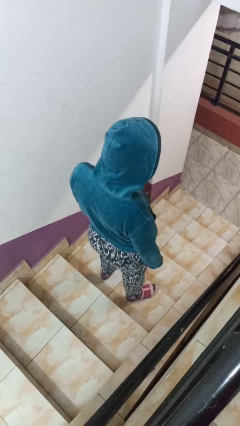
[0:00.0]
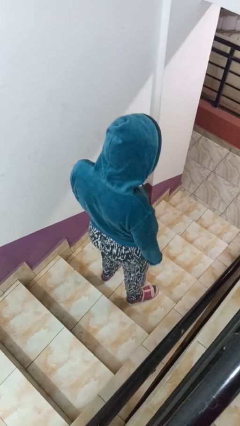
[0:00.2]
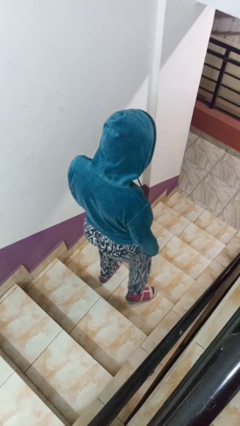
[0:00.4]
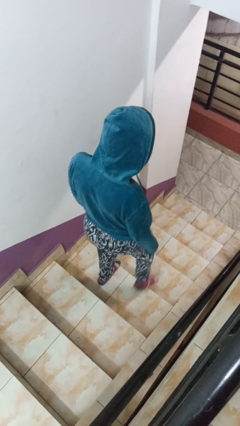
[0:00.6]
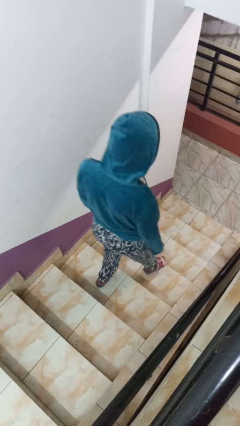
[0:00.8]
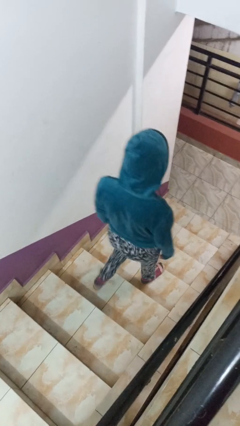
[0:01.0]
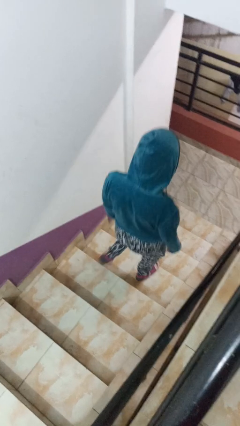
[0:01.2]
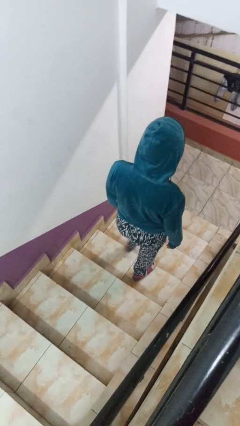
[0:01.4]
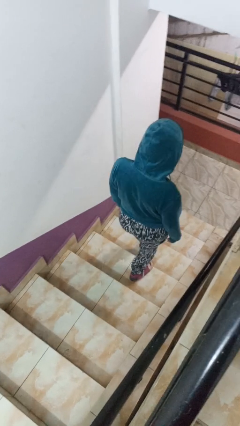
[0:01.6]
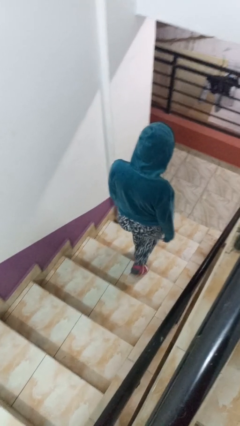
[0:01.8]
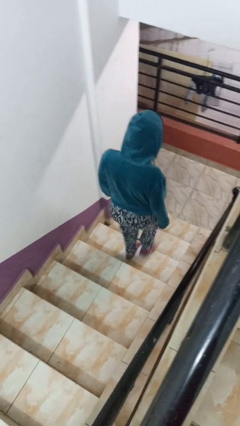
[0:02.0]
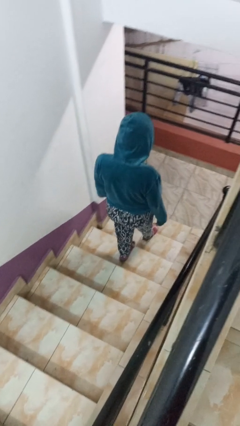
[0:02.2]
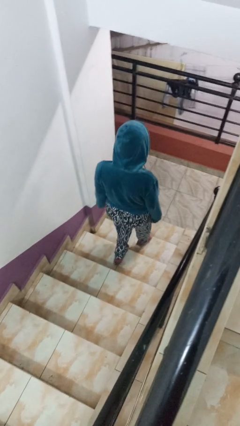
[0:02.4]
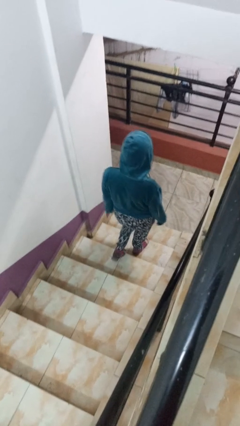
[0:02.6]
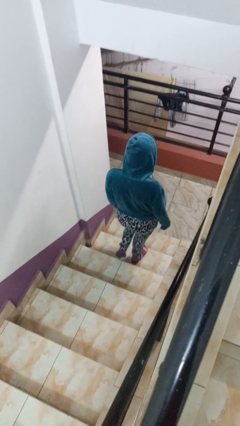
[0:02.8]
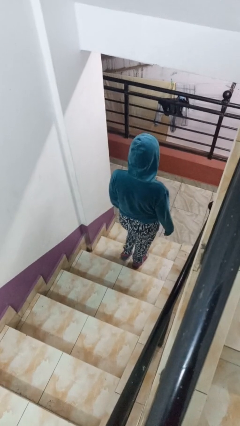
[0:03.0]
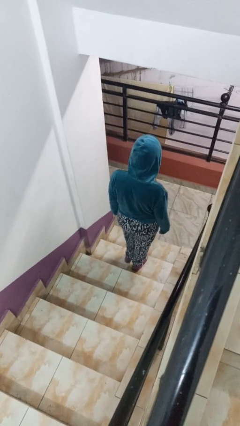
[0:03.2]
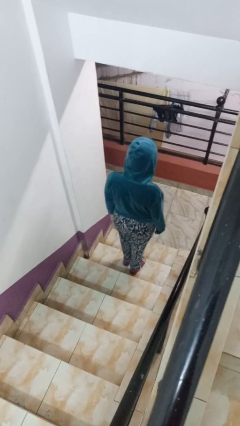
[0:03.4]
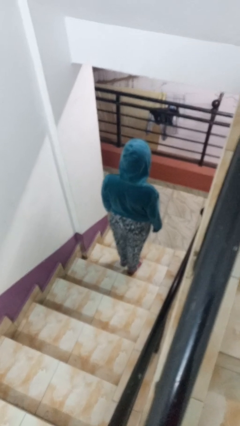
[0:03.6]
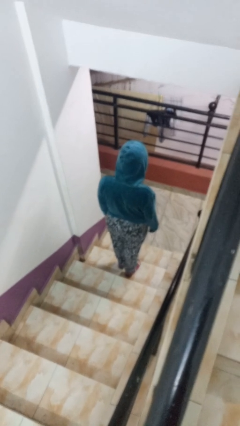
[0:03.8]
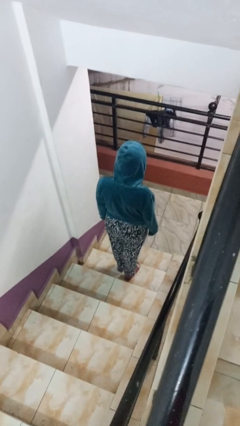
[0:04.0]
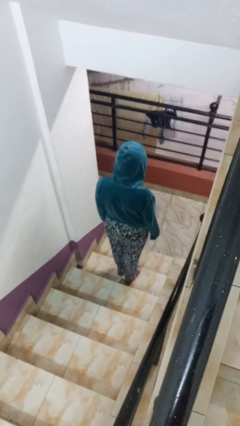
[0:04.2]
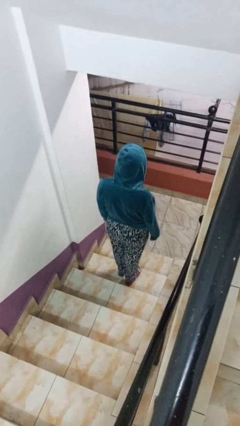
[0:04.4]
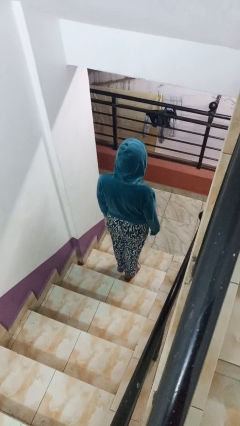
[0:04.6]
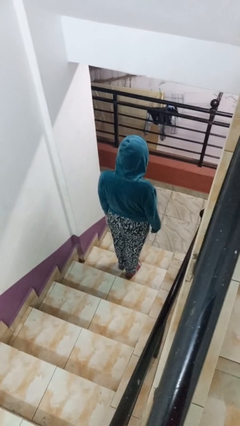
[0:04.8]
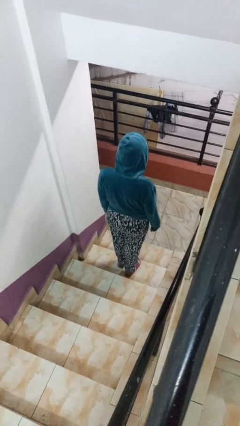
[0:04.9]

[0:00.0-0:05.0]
person climbs down stairs

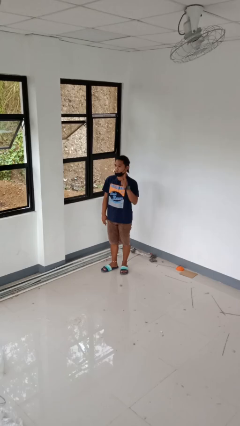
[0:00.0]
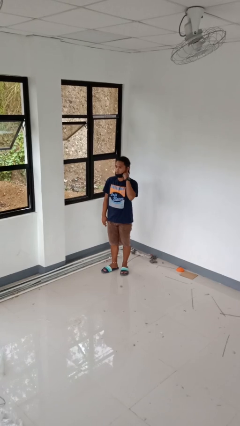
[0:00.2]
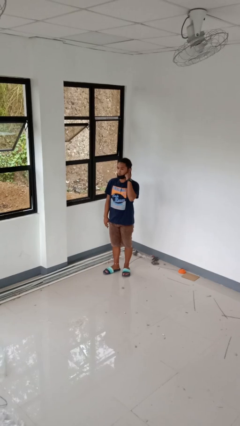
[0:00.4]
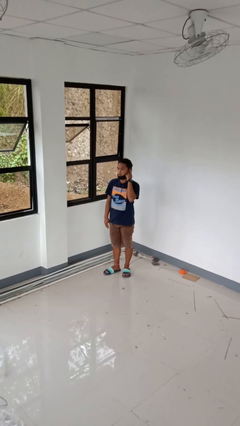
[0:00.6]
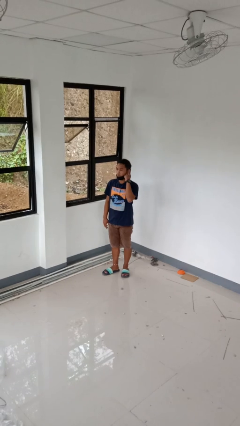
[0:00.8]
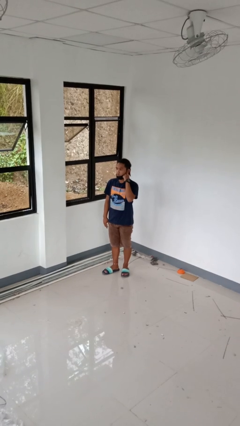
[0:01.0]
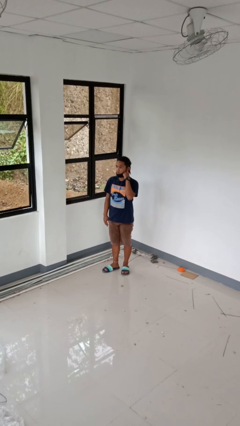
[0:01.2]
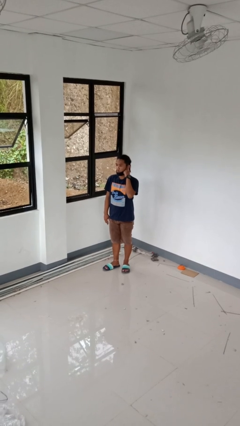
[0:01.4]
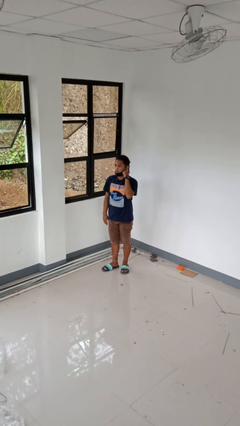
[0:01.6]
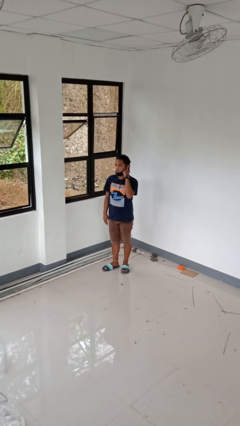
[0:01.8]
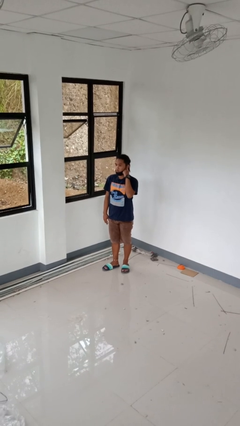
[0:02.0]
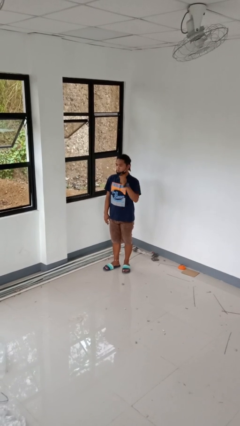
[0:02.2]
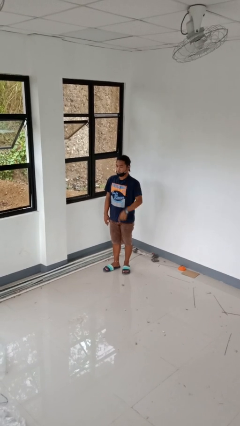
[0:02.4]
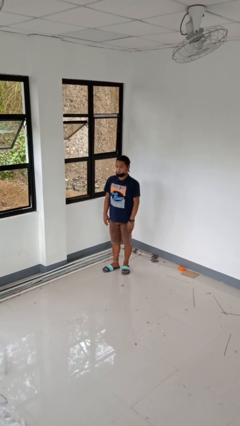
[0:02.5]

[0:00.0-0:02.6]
person gestures listen closely

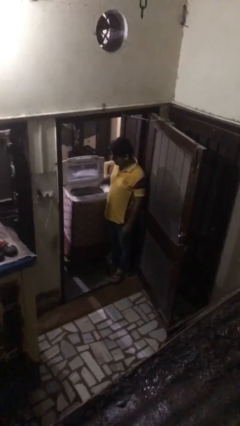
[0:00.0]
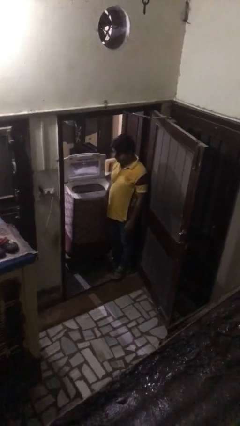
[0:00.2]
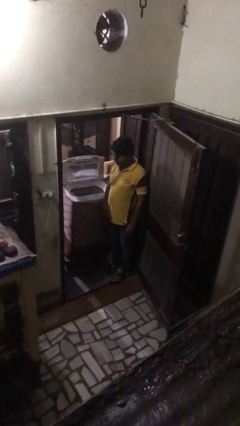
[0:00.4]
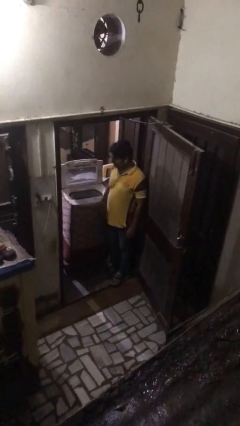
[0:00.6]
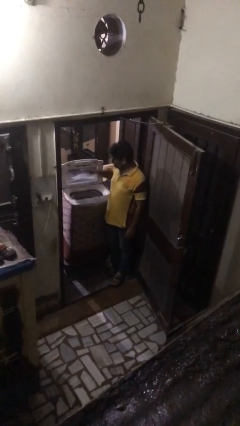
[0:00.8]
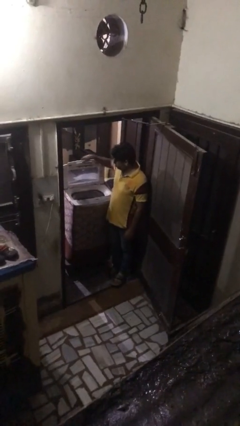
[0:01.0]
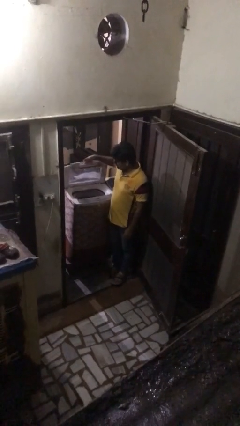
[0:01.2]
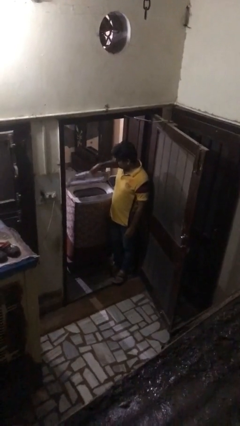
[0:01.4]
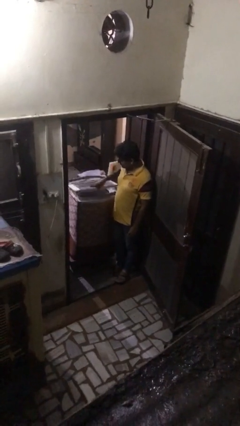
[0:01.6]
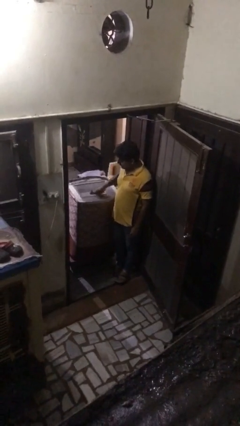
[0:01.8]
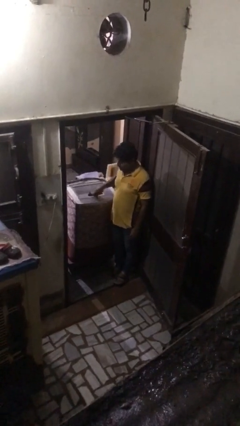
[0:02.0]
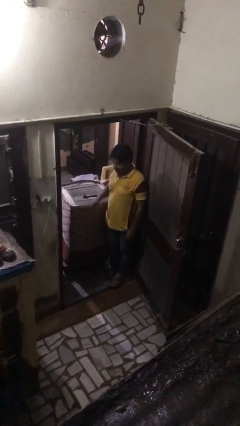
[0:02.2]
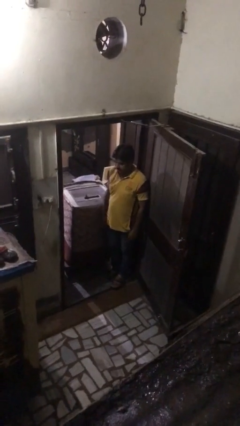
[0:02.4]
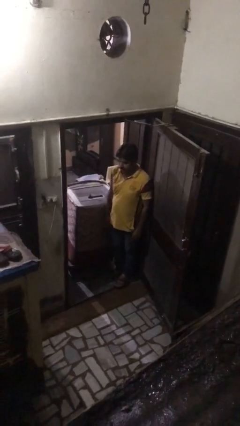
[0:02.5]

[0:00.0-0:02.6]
person closes clothes washer

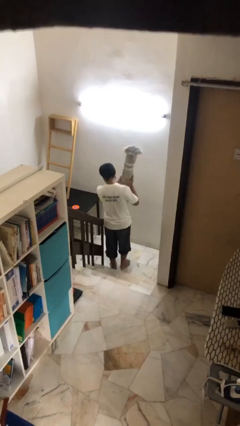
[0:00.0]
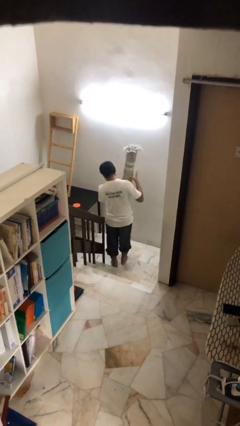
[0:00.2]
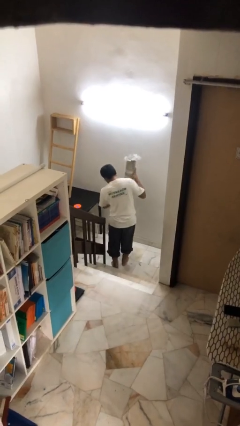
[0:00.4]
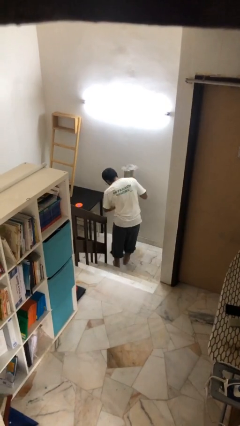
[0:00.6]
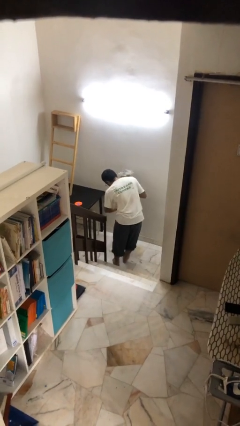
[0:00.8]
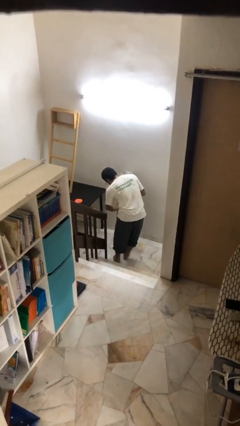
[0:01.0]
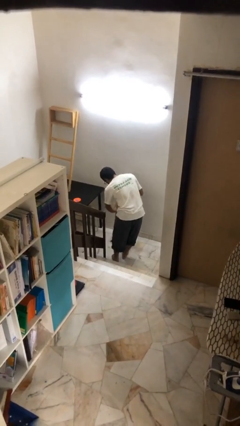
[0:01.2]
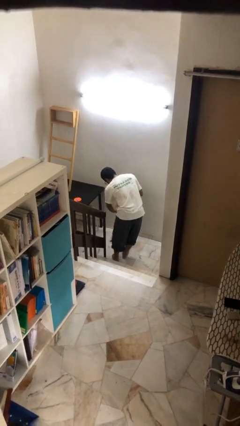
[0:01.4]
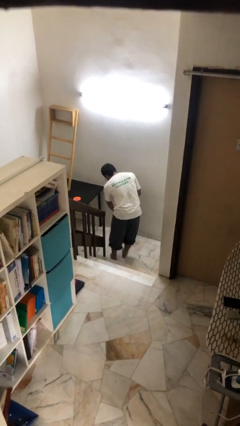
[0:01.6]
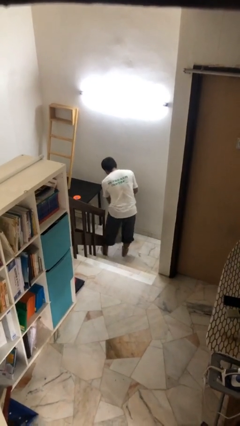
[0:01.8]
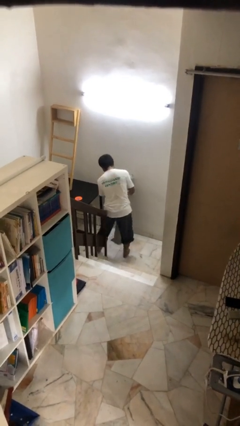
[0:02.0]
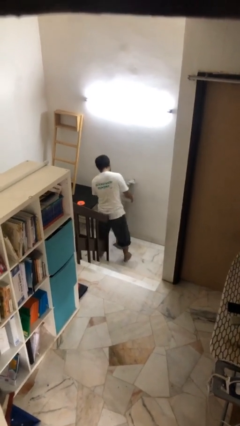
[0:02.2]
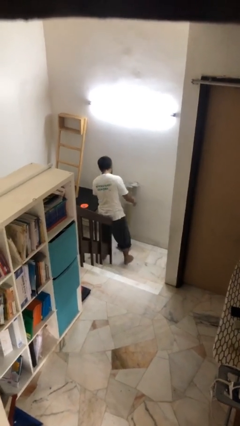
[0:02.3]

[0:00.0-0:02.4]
person puts down object on floor

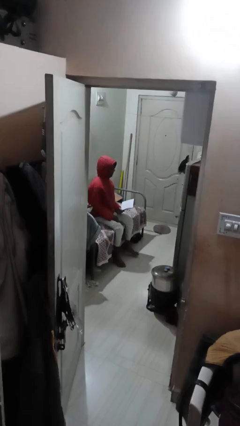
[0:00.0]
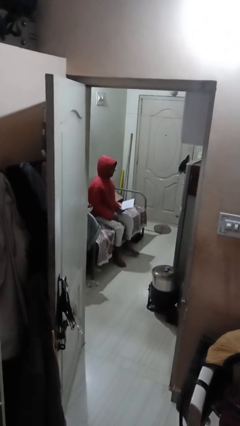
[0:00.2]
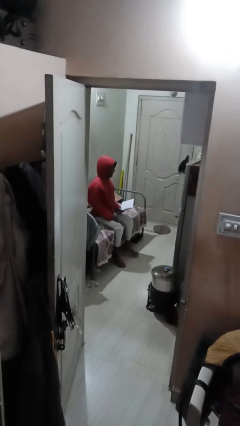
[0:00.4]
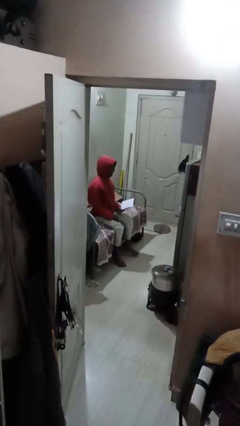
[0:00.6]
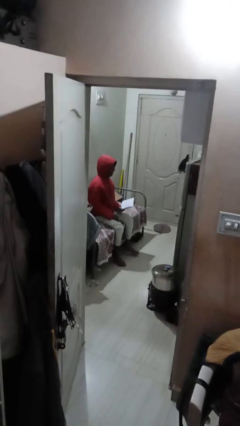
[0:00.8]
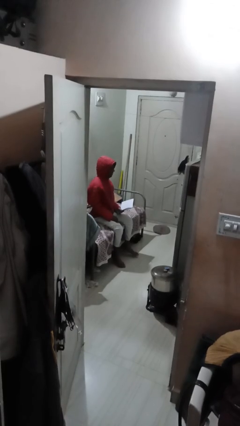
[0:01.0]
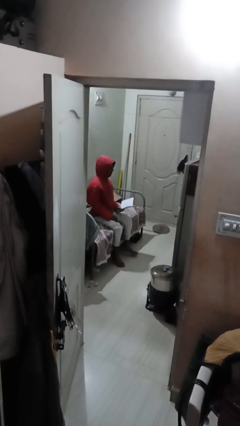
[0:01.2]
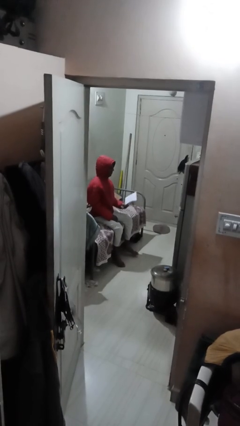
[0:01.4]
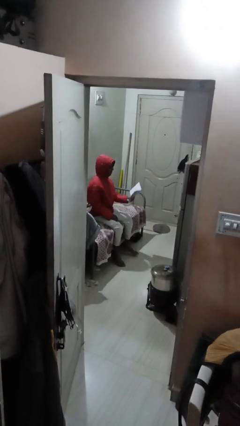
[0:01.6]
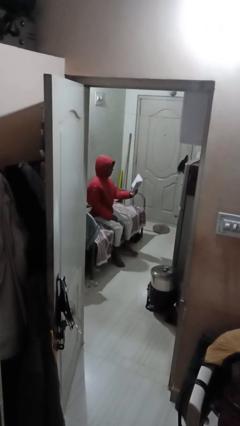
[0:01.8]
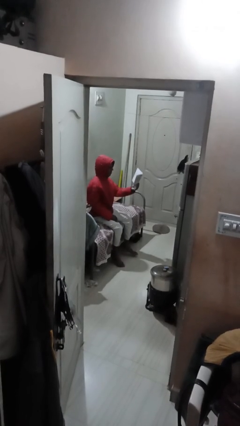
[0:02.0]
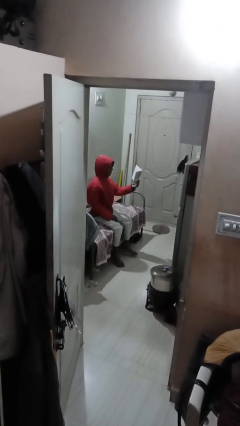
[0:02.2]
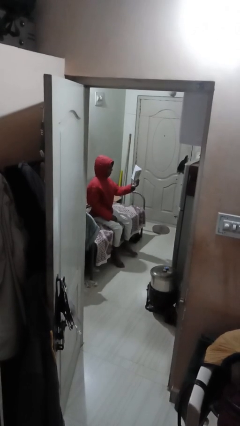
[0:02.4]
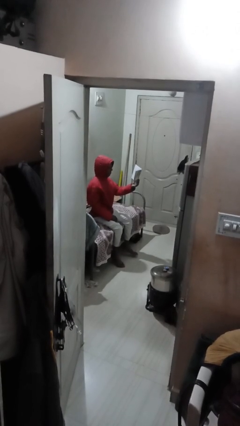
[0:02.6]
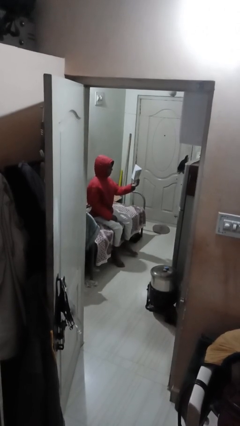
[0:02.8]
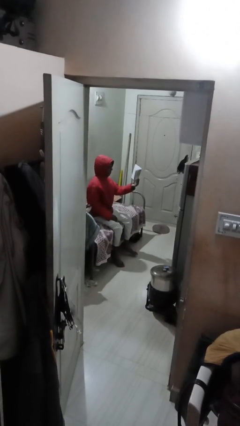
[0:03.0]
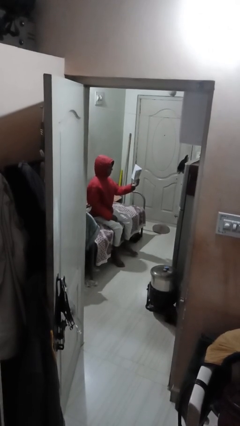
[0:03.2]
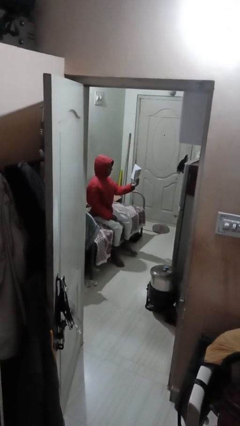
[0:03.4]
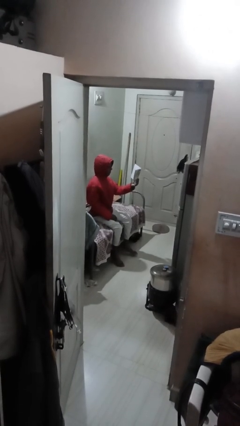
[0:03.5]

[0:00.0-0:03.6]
person reads document

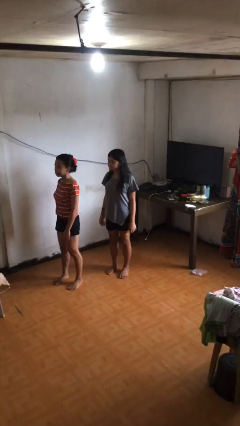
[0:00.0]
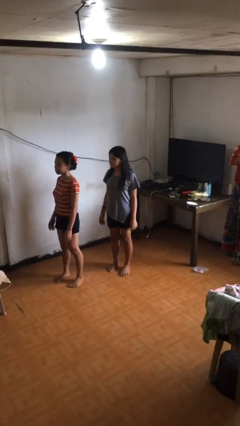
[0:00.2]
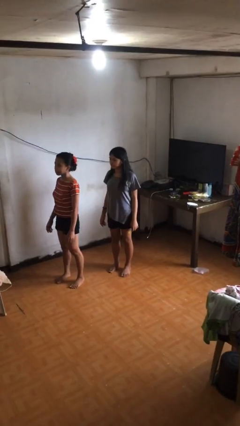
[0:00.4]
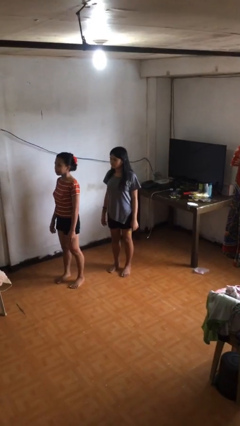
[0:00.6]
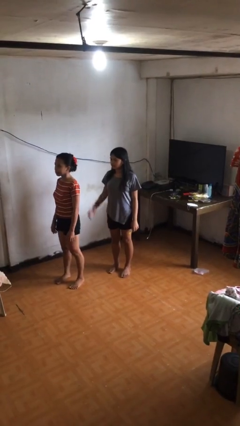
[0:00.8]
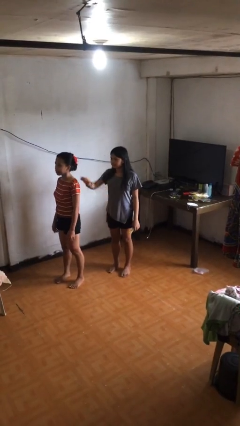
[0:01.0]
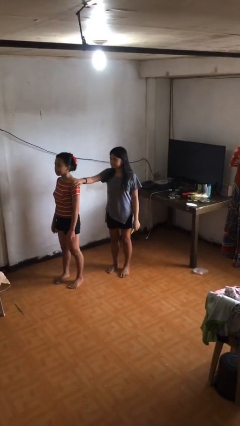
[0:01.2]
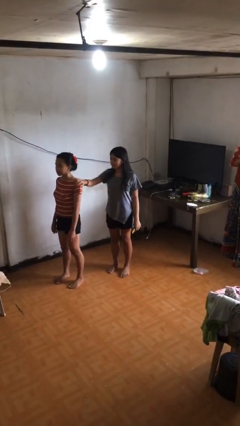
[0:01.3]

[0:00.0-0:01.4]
person grabs person by shoulder

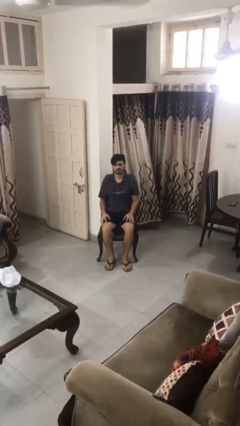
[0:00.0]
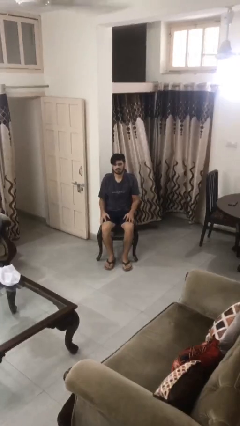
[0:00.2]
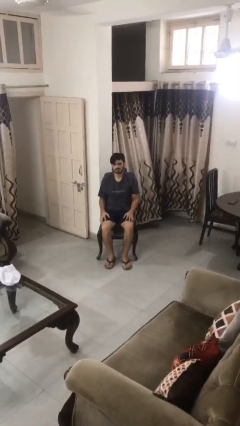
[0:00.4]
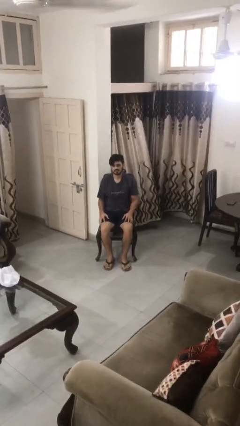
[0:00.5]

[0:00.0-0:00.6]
person sits down
